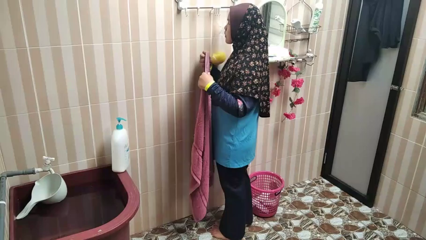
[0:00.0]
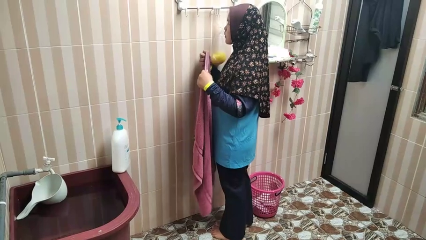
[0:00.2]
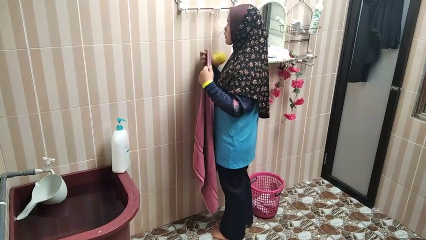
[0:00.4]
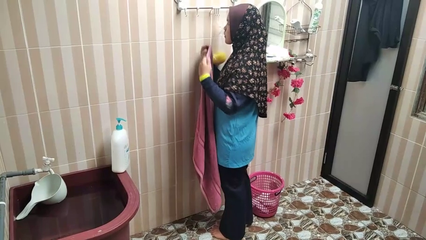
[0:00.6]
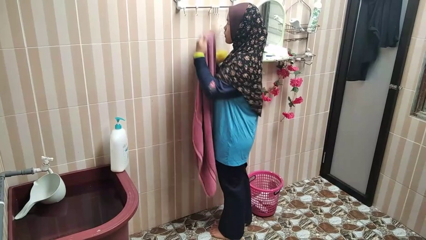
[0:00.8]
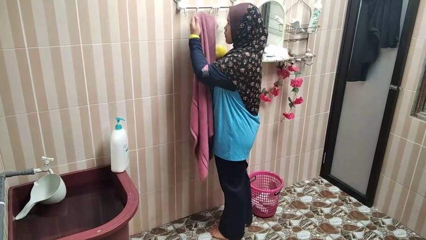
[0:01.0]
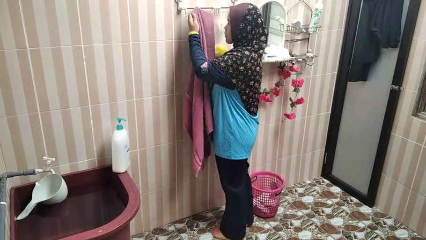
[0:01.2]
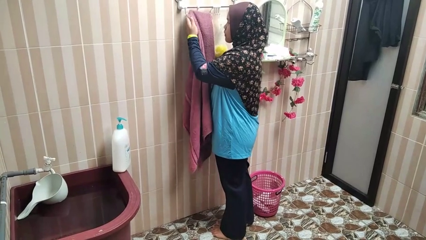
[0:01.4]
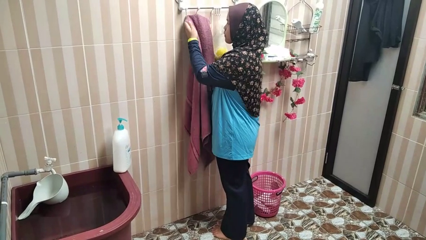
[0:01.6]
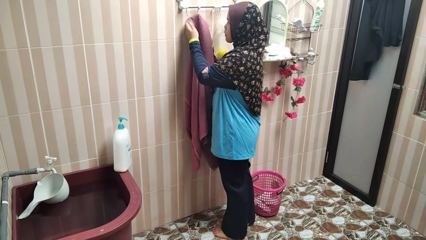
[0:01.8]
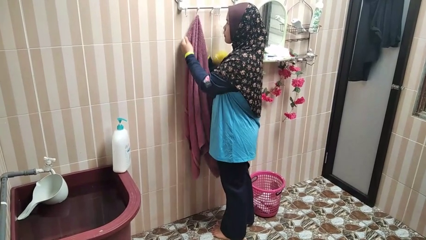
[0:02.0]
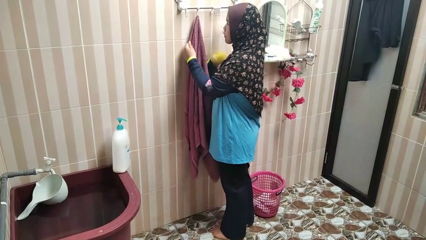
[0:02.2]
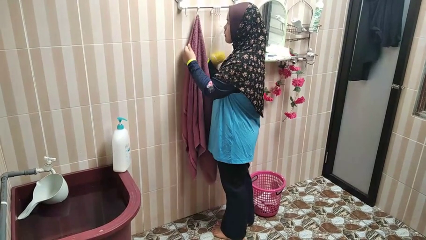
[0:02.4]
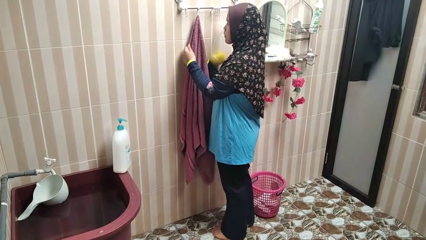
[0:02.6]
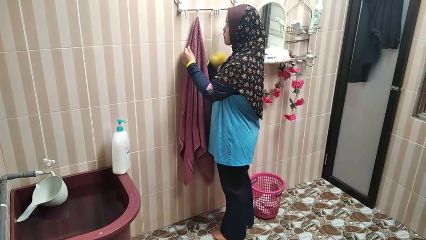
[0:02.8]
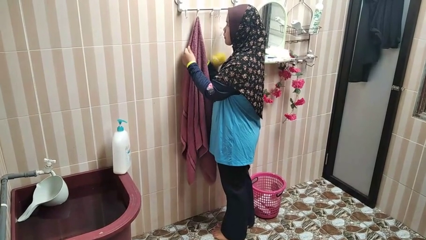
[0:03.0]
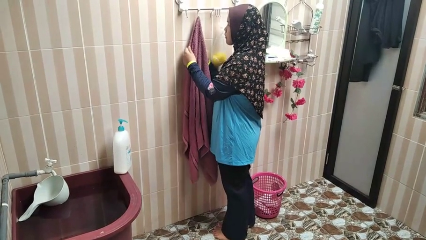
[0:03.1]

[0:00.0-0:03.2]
person folds towel

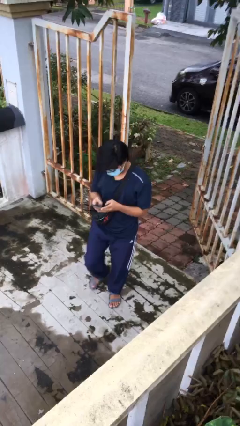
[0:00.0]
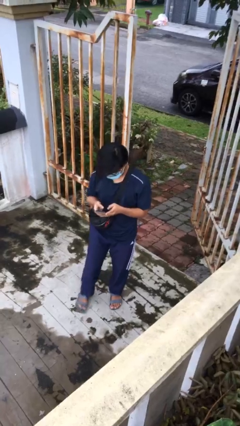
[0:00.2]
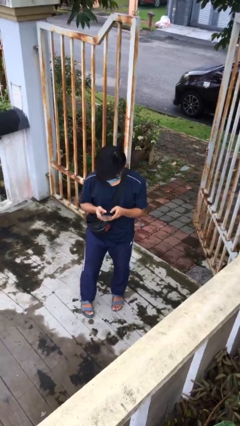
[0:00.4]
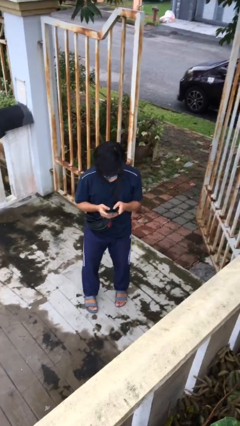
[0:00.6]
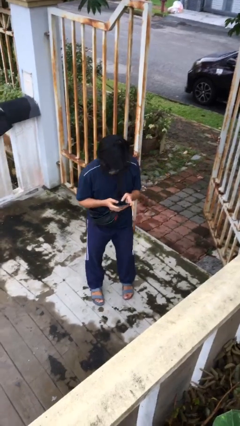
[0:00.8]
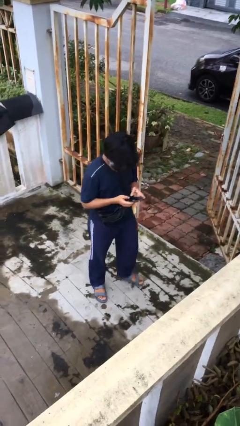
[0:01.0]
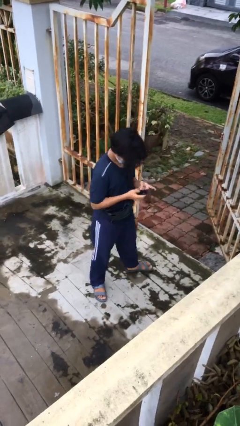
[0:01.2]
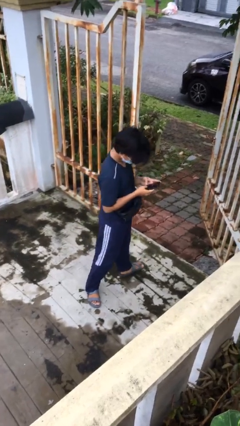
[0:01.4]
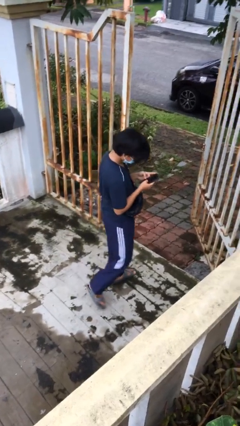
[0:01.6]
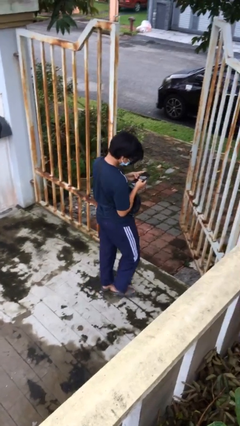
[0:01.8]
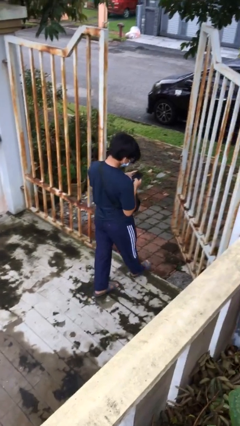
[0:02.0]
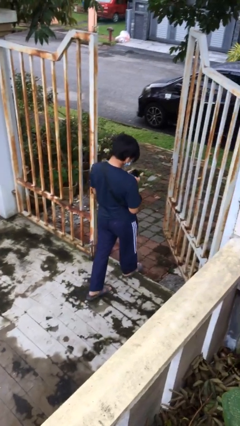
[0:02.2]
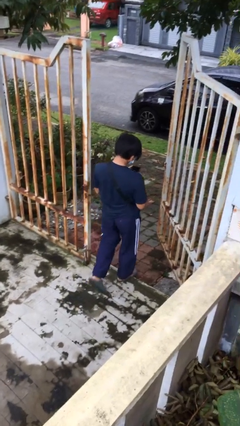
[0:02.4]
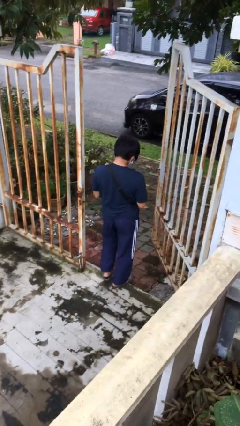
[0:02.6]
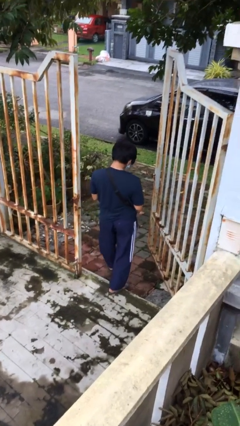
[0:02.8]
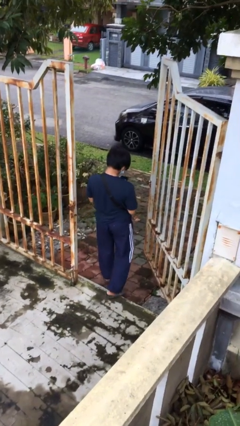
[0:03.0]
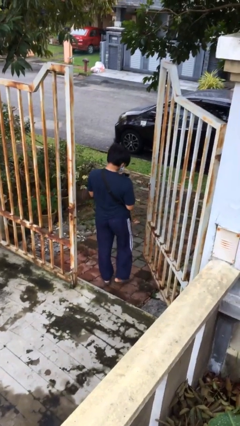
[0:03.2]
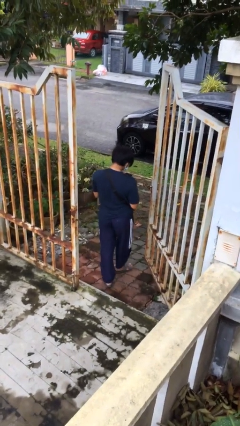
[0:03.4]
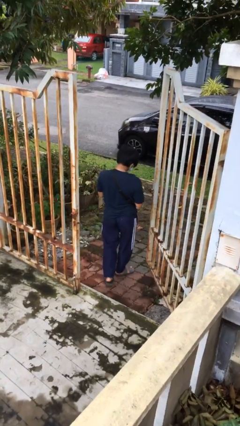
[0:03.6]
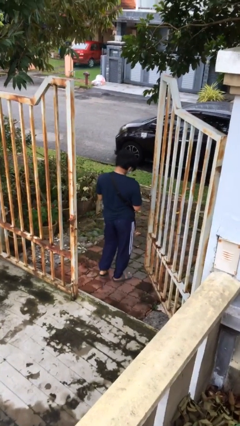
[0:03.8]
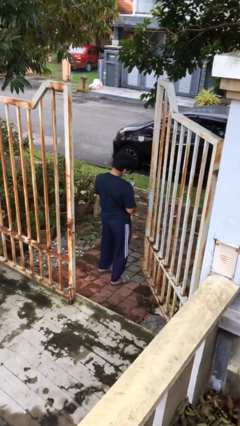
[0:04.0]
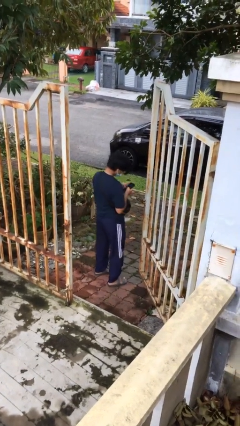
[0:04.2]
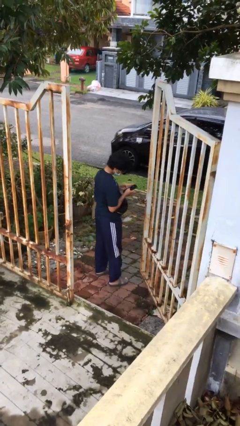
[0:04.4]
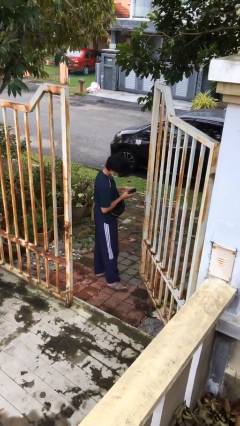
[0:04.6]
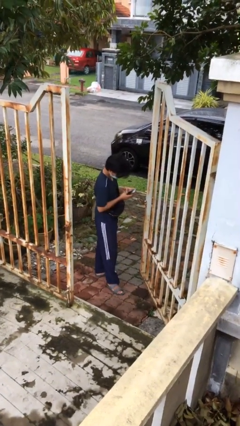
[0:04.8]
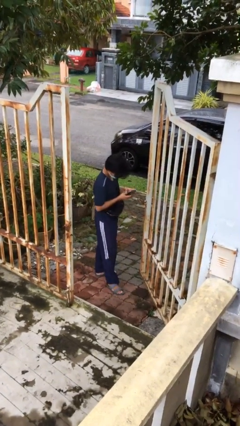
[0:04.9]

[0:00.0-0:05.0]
person exits scene through structure

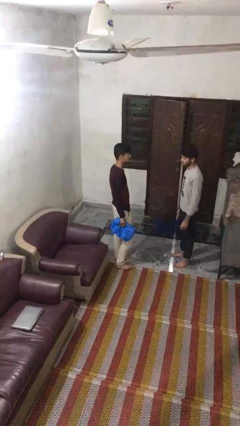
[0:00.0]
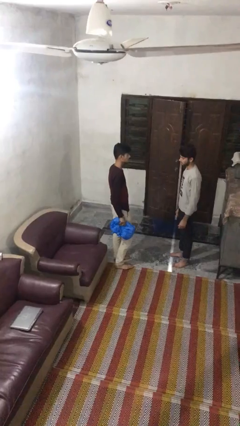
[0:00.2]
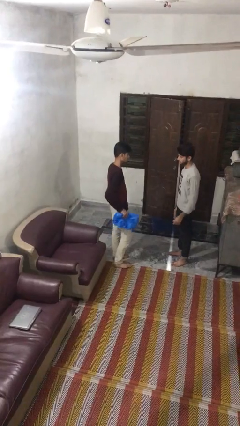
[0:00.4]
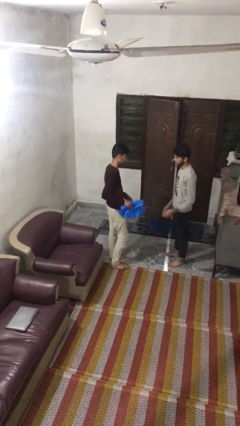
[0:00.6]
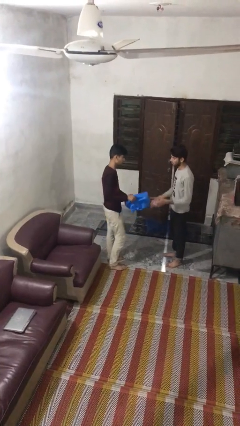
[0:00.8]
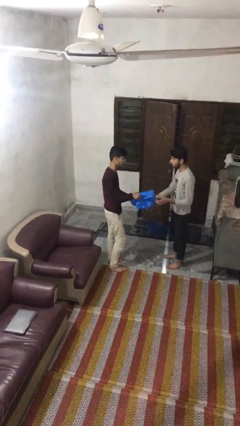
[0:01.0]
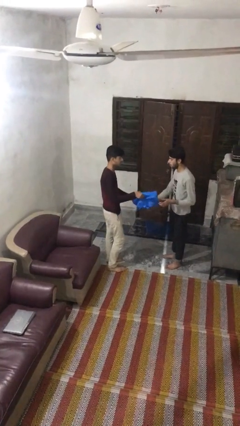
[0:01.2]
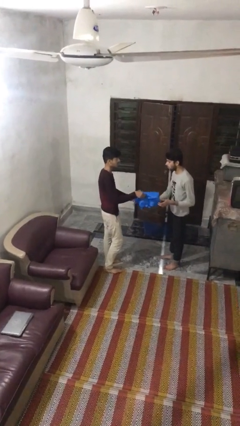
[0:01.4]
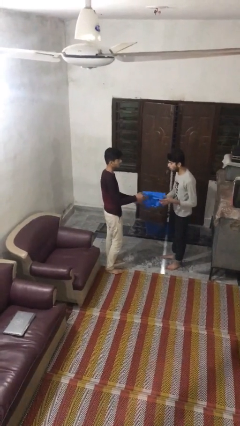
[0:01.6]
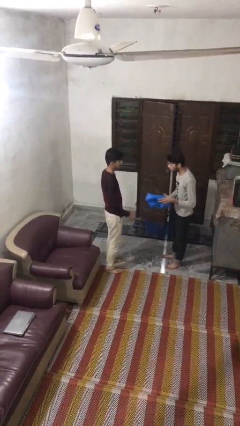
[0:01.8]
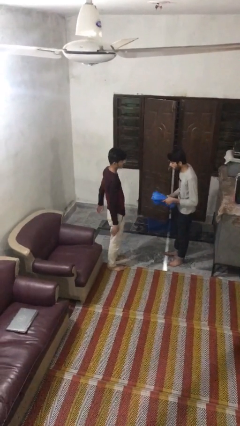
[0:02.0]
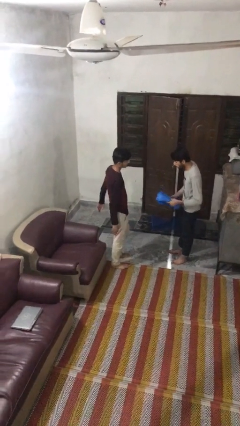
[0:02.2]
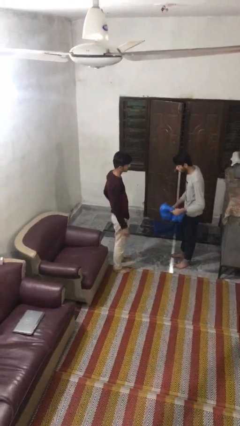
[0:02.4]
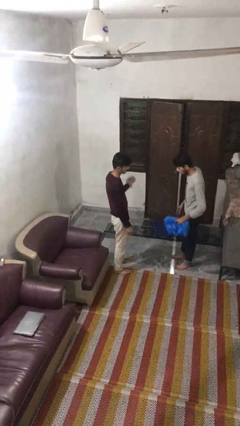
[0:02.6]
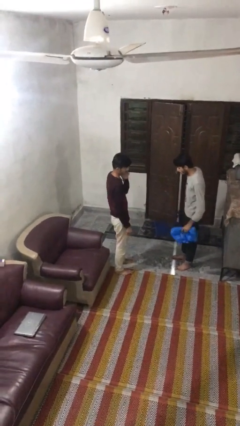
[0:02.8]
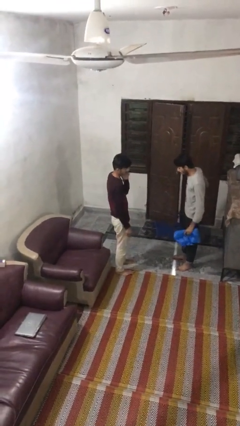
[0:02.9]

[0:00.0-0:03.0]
person transfers object to person

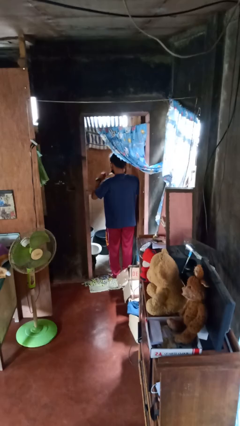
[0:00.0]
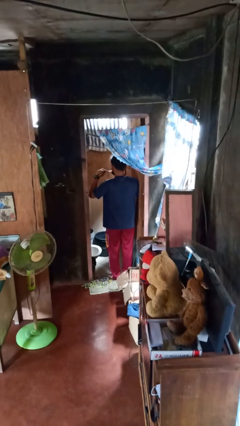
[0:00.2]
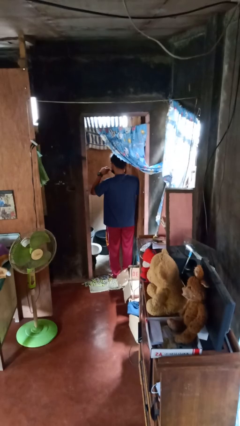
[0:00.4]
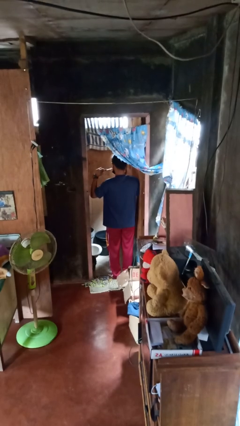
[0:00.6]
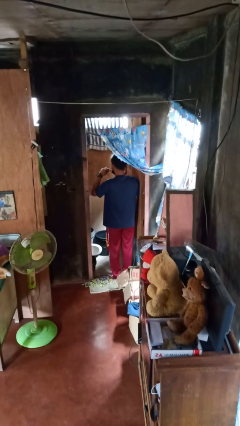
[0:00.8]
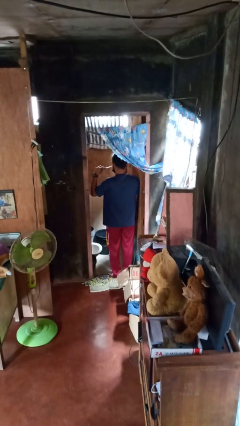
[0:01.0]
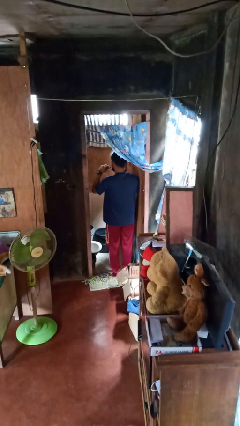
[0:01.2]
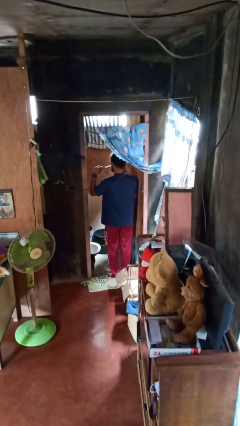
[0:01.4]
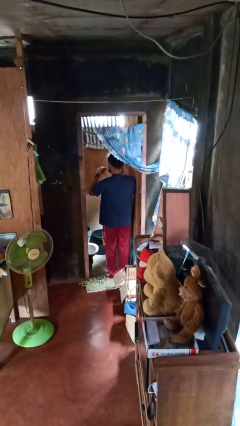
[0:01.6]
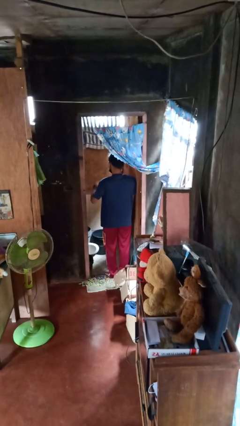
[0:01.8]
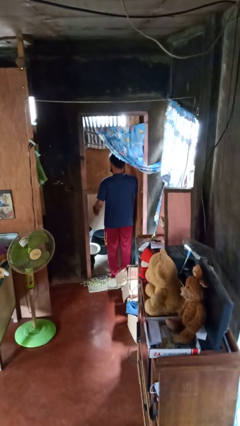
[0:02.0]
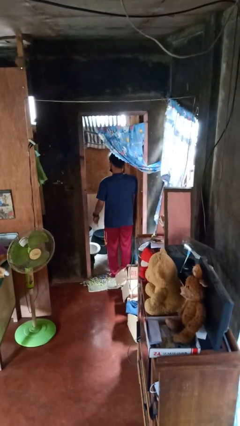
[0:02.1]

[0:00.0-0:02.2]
person brushes teeth

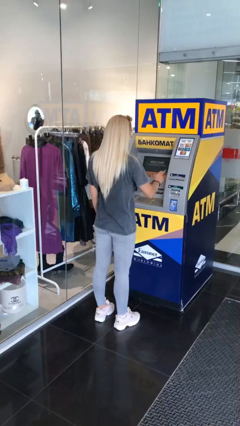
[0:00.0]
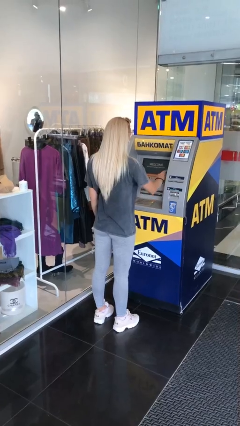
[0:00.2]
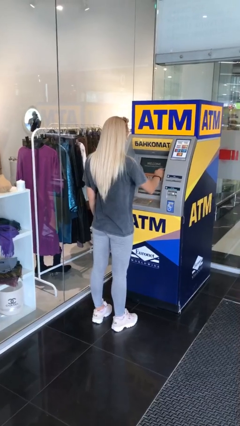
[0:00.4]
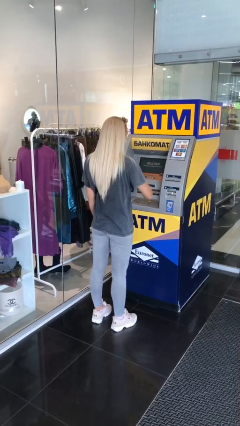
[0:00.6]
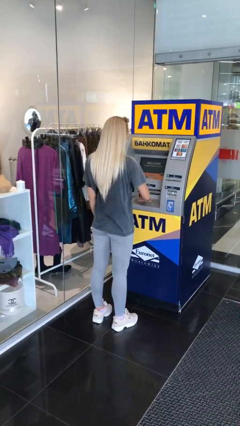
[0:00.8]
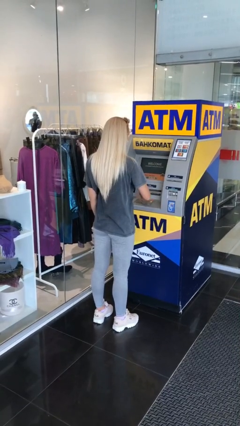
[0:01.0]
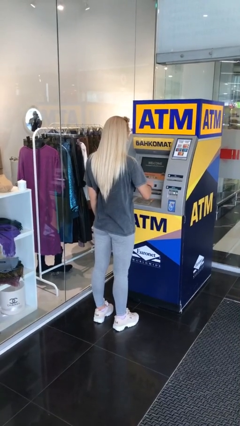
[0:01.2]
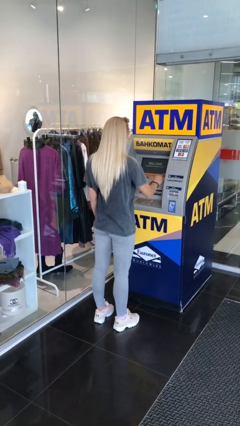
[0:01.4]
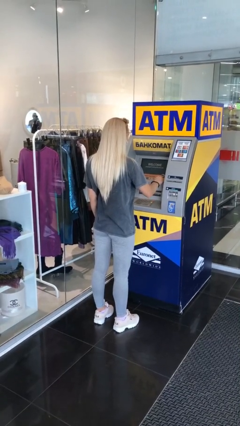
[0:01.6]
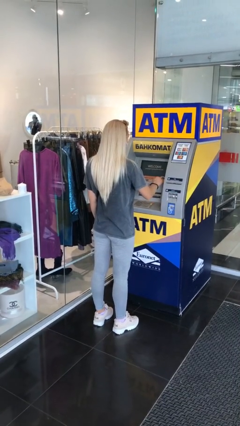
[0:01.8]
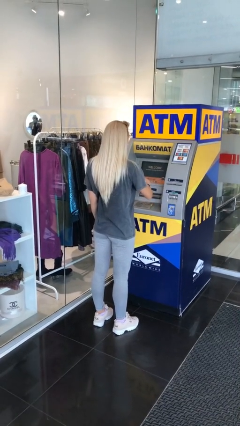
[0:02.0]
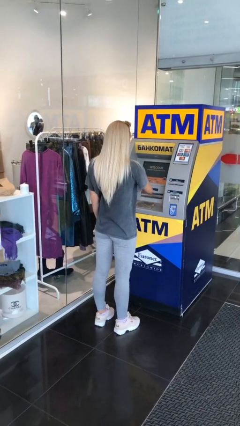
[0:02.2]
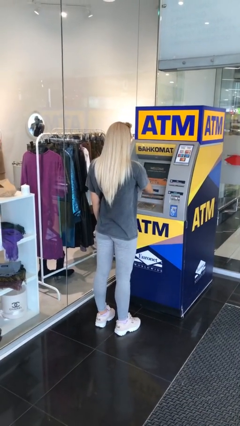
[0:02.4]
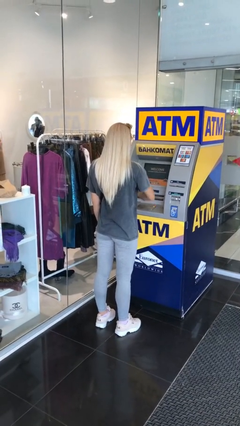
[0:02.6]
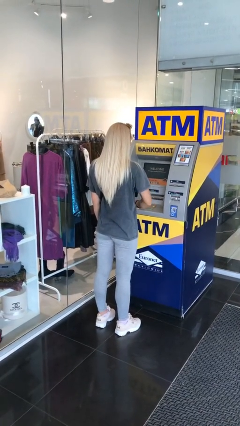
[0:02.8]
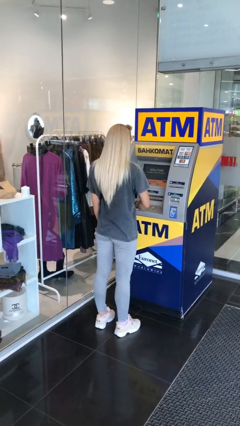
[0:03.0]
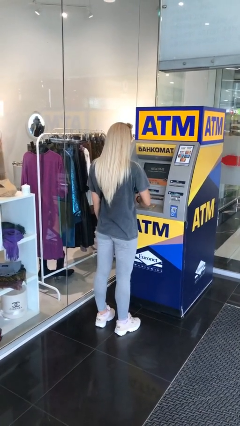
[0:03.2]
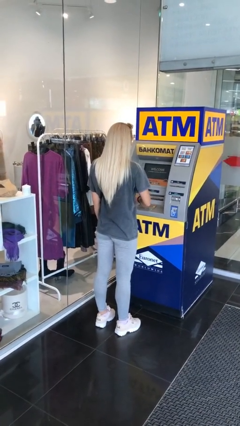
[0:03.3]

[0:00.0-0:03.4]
person purchases from machine

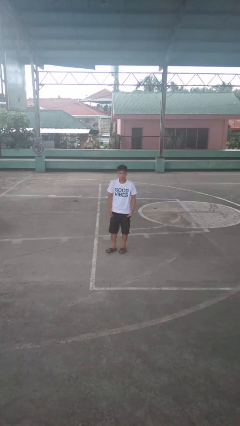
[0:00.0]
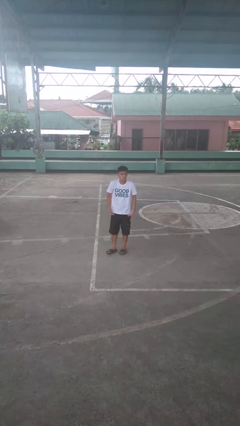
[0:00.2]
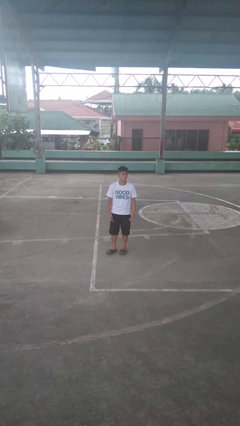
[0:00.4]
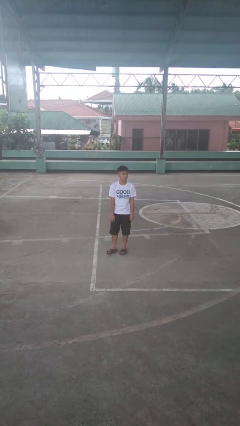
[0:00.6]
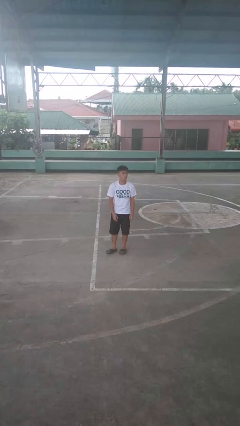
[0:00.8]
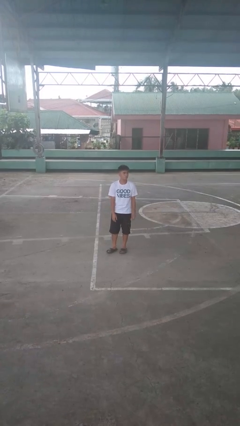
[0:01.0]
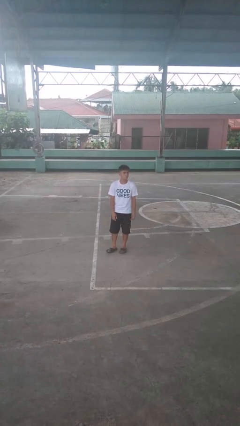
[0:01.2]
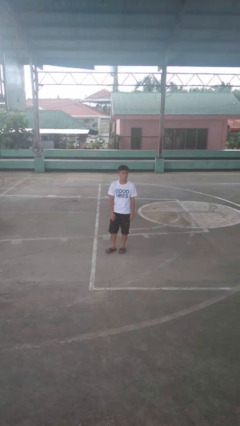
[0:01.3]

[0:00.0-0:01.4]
person shrugs
